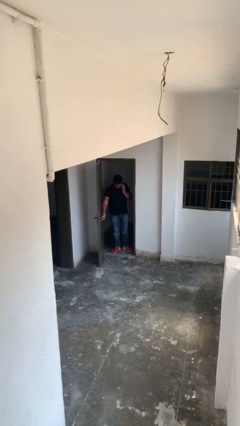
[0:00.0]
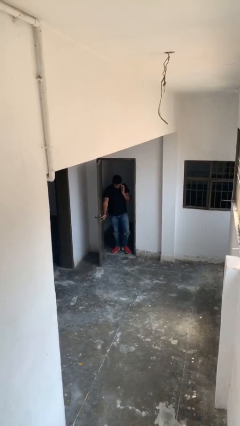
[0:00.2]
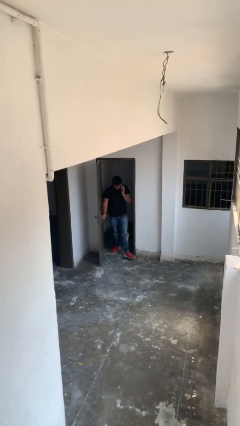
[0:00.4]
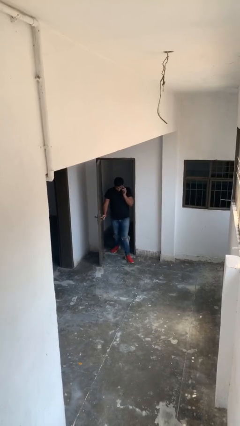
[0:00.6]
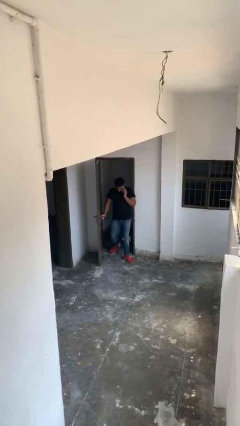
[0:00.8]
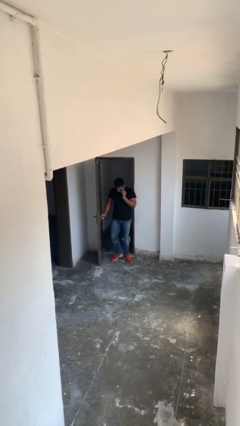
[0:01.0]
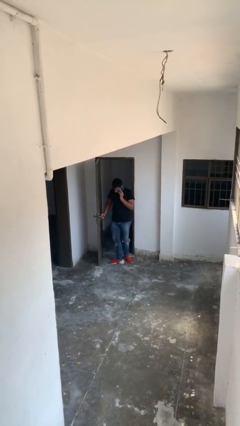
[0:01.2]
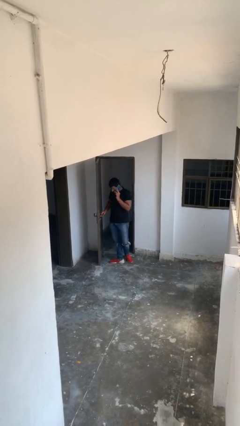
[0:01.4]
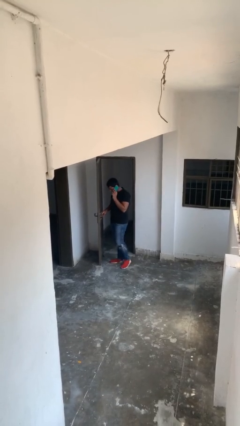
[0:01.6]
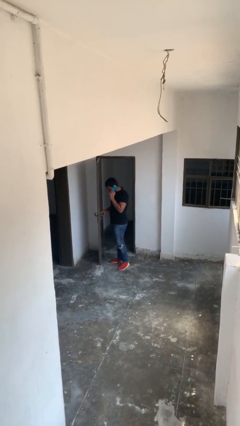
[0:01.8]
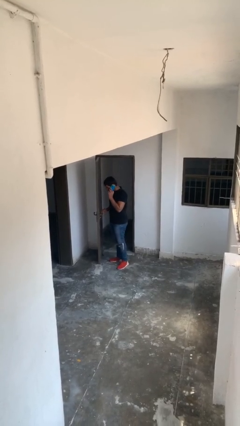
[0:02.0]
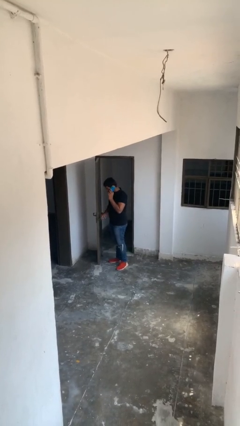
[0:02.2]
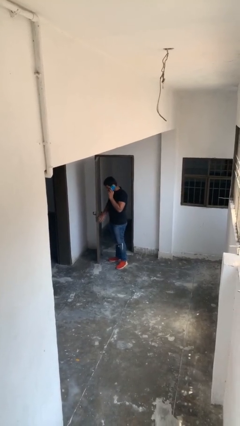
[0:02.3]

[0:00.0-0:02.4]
person enters scene through structure

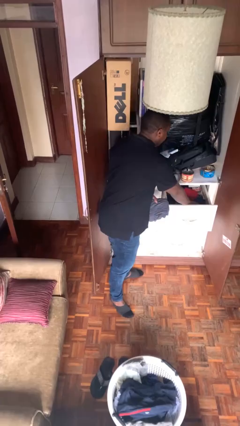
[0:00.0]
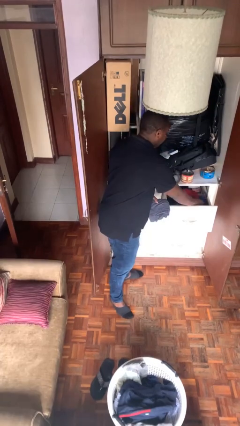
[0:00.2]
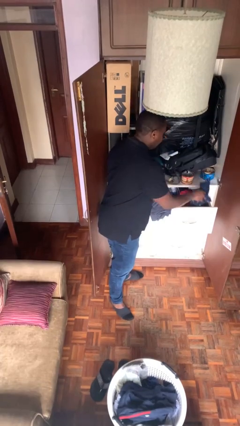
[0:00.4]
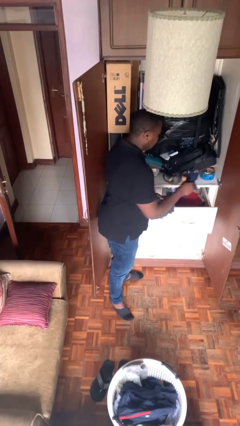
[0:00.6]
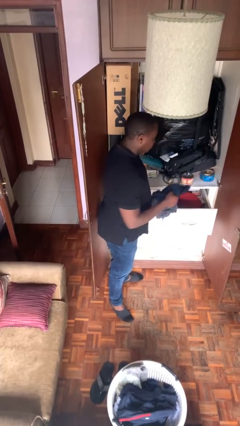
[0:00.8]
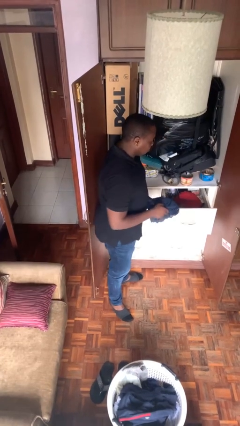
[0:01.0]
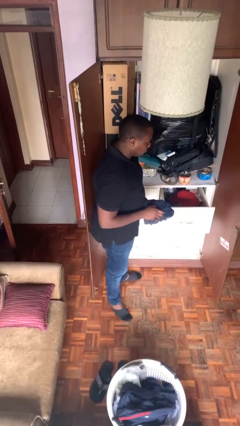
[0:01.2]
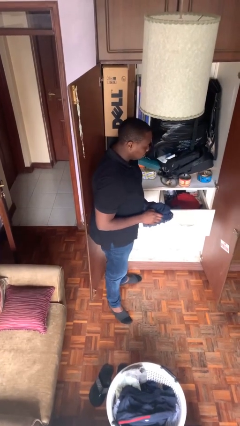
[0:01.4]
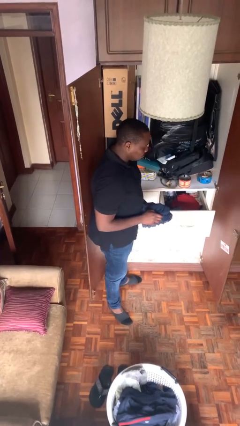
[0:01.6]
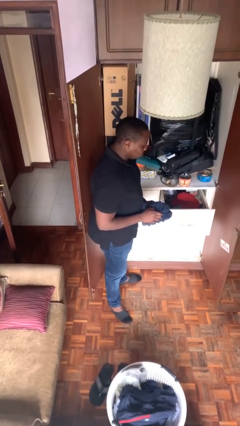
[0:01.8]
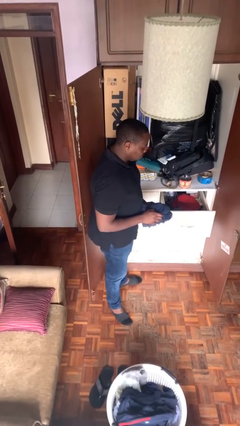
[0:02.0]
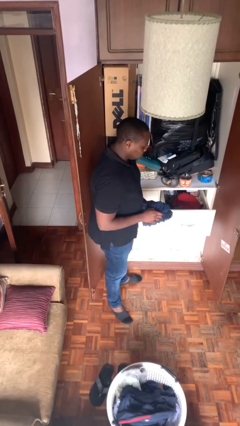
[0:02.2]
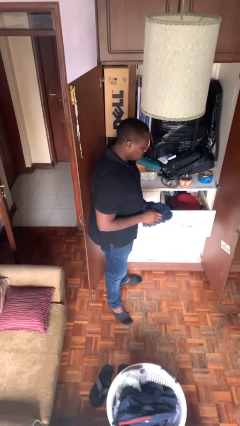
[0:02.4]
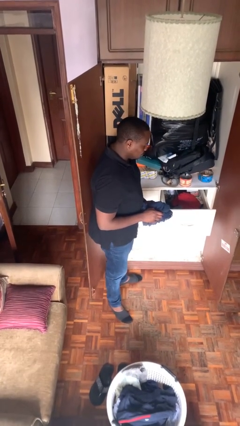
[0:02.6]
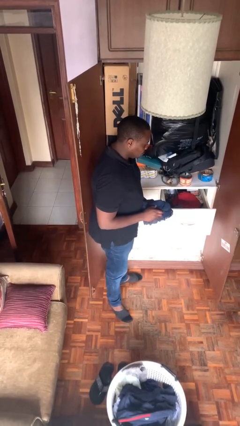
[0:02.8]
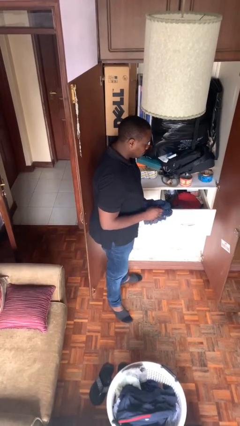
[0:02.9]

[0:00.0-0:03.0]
person takes clothes from dresser

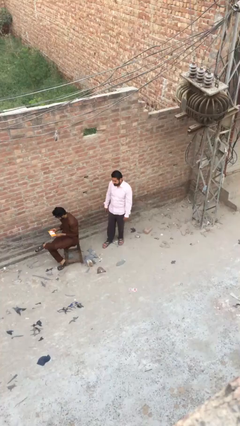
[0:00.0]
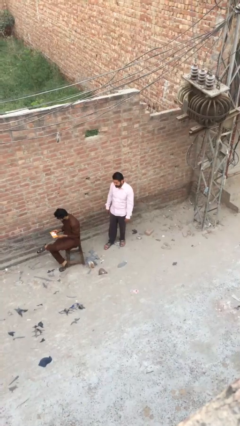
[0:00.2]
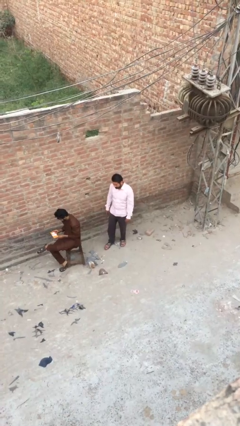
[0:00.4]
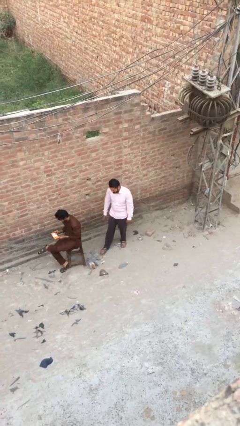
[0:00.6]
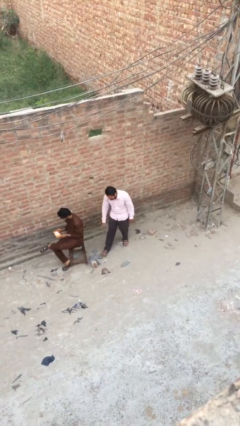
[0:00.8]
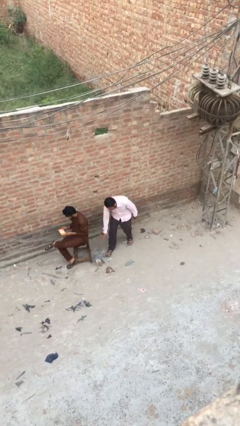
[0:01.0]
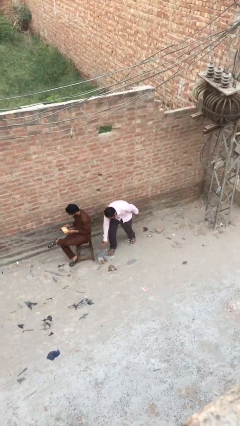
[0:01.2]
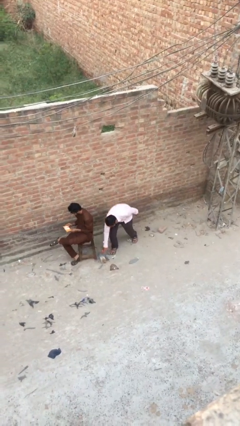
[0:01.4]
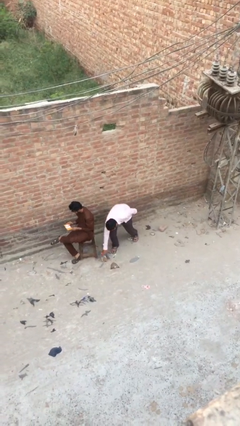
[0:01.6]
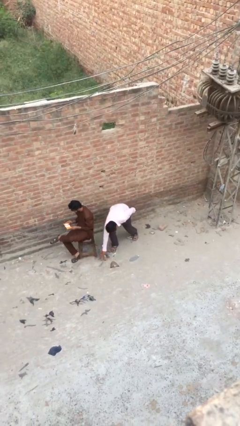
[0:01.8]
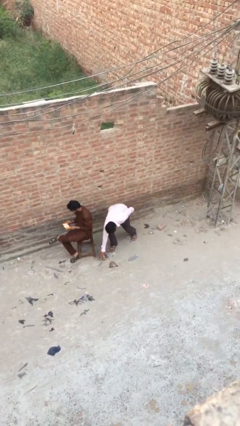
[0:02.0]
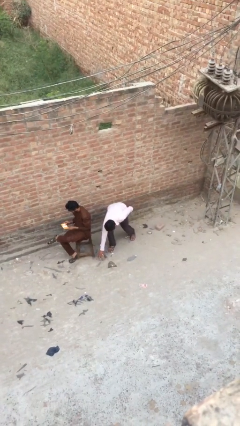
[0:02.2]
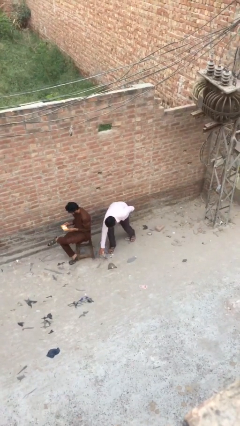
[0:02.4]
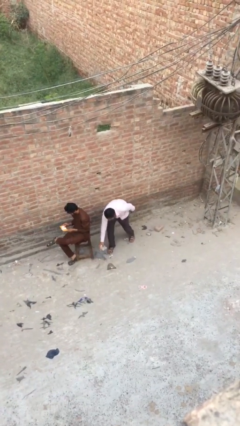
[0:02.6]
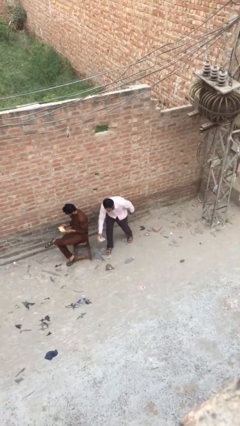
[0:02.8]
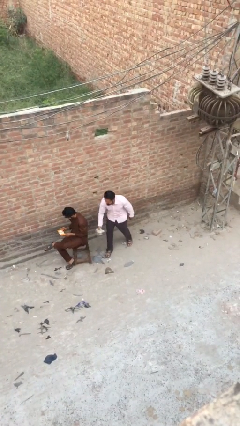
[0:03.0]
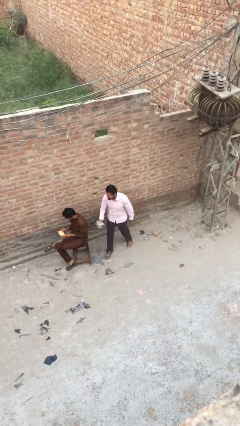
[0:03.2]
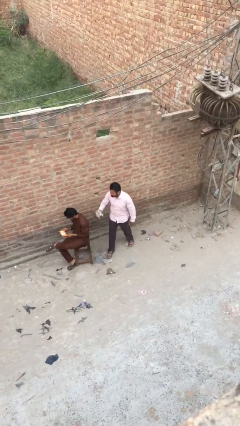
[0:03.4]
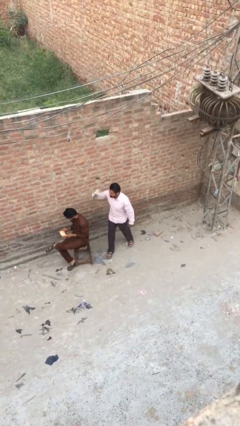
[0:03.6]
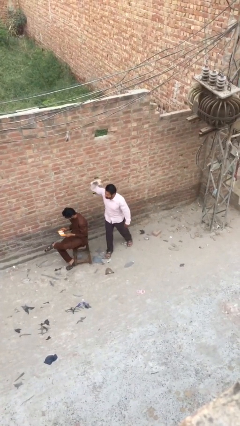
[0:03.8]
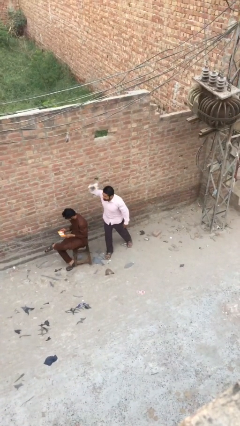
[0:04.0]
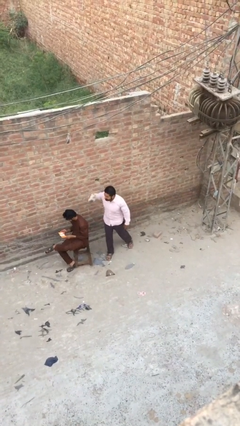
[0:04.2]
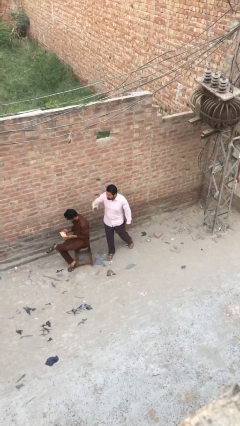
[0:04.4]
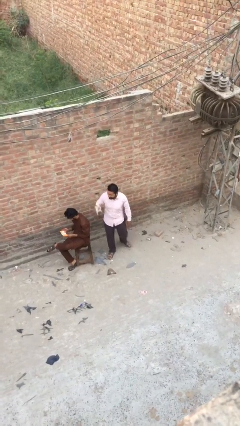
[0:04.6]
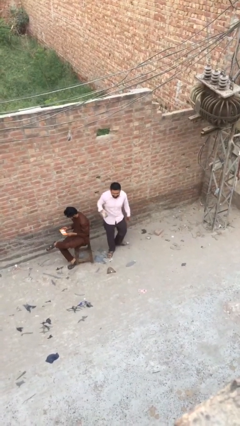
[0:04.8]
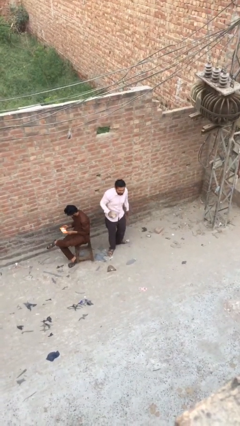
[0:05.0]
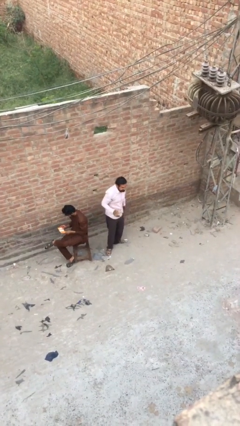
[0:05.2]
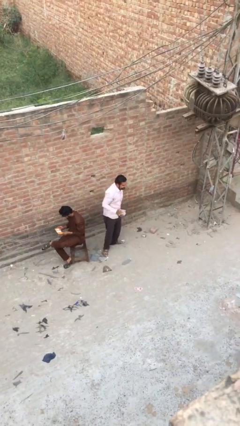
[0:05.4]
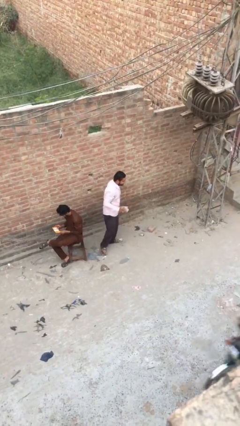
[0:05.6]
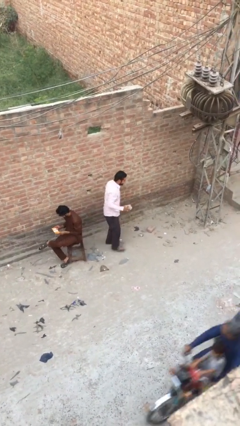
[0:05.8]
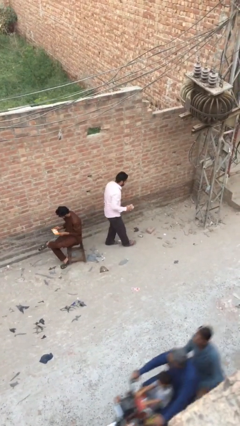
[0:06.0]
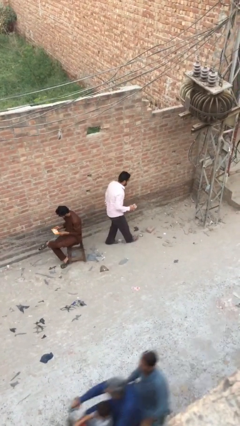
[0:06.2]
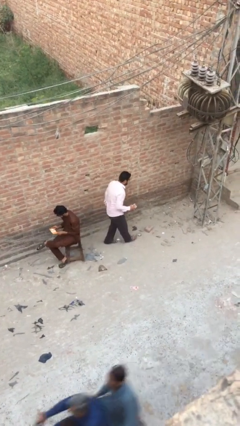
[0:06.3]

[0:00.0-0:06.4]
person steals object from person

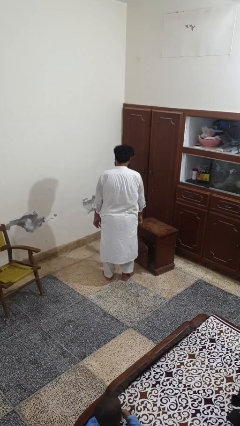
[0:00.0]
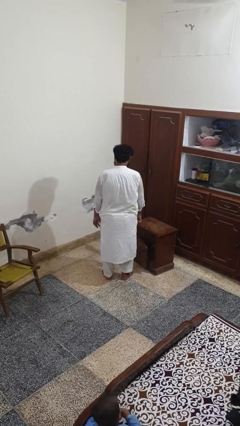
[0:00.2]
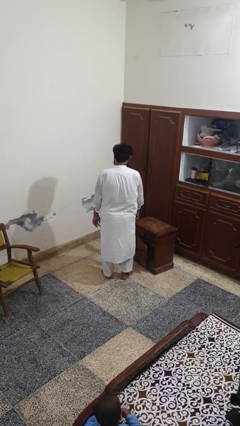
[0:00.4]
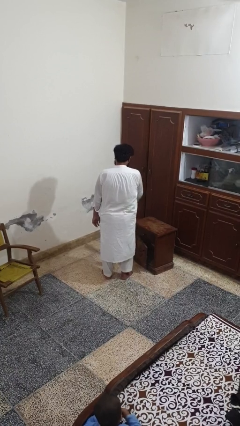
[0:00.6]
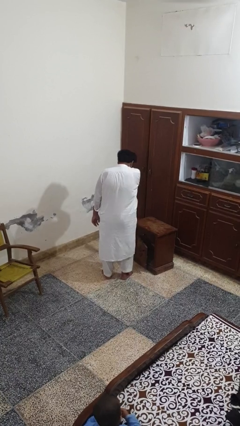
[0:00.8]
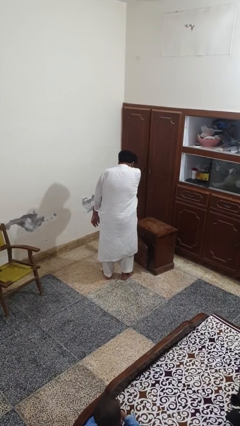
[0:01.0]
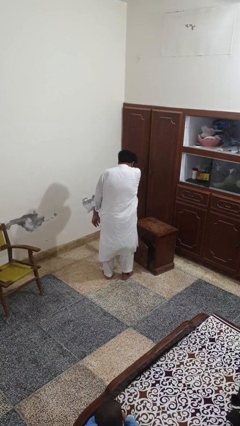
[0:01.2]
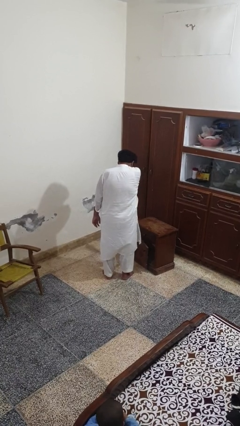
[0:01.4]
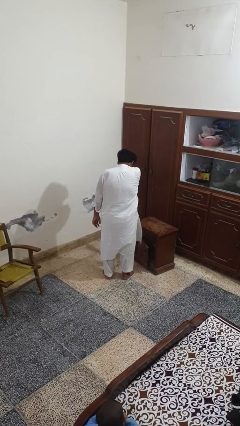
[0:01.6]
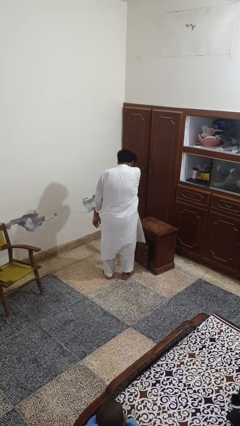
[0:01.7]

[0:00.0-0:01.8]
person sneezes into arm

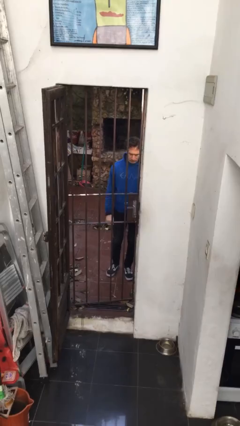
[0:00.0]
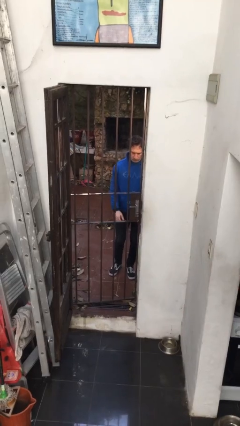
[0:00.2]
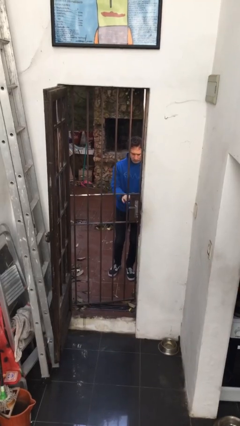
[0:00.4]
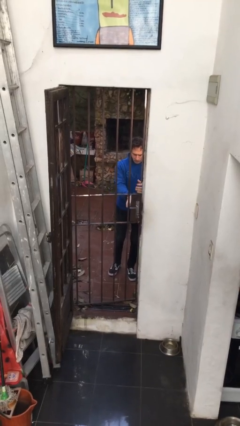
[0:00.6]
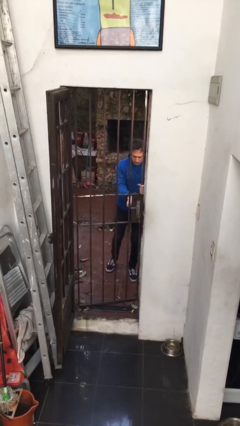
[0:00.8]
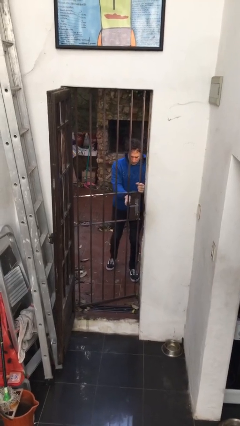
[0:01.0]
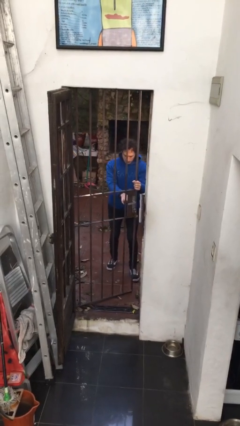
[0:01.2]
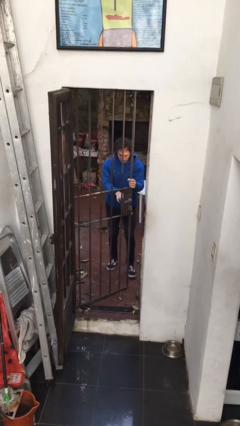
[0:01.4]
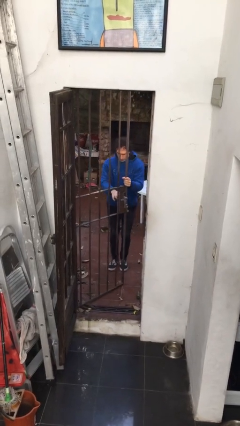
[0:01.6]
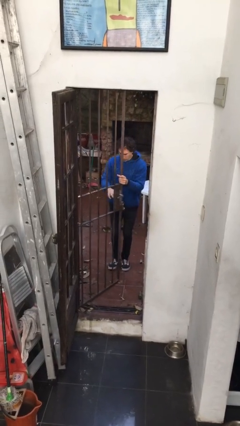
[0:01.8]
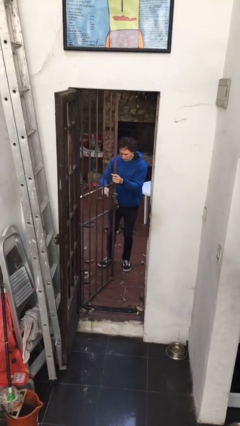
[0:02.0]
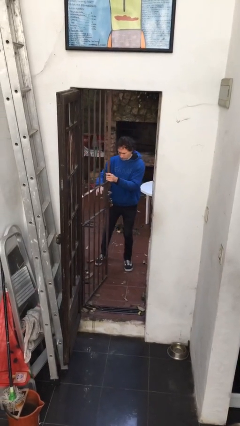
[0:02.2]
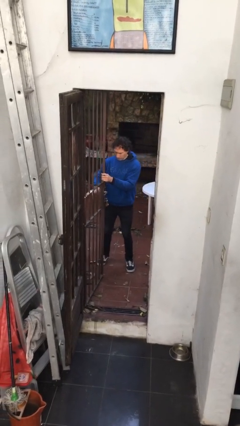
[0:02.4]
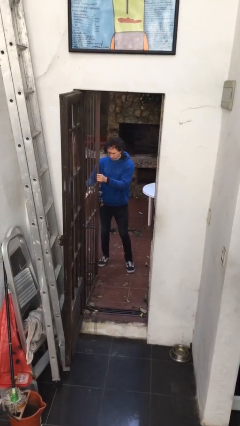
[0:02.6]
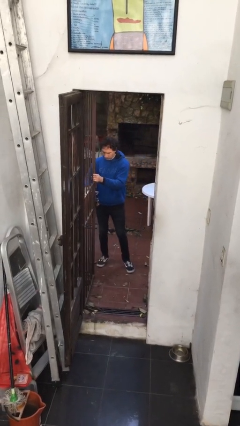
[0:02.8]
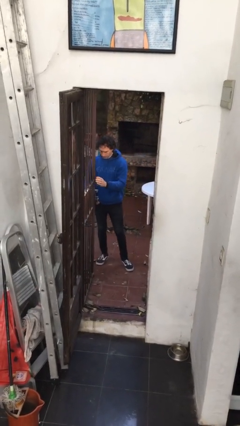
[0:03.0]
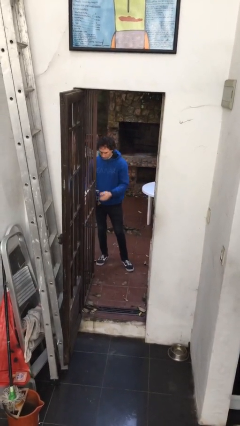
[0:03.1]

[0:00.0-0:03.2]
person opens gate

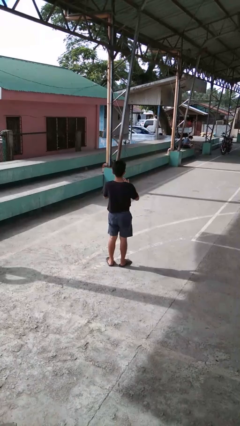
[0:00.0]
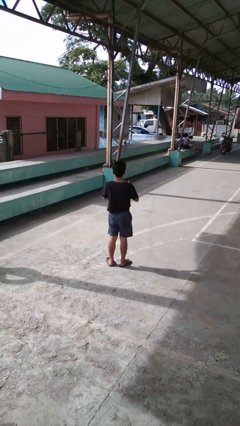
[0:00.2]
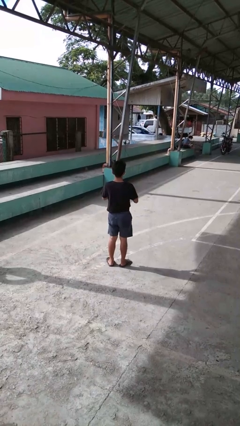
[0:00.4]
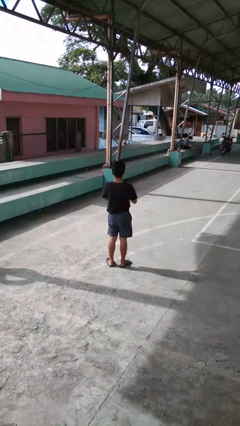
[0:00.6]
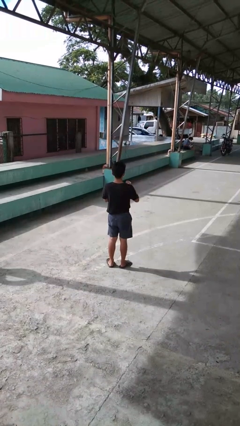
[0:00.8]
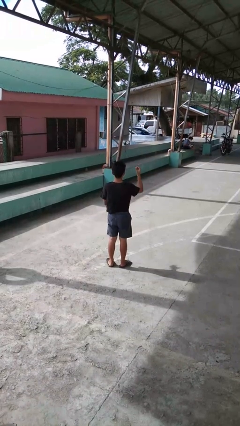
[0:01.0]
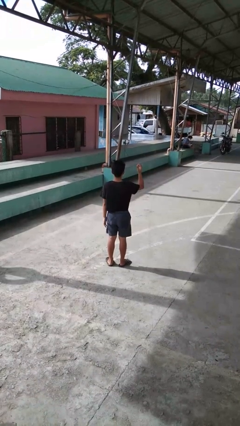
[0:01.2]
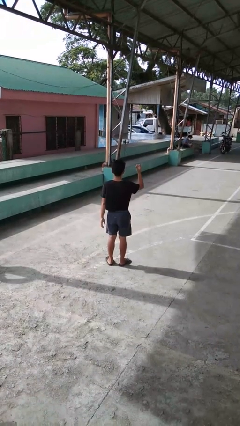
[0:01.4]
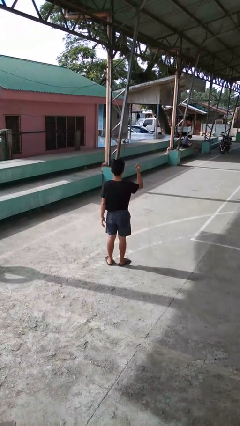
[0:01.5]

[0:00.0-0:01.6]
person takes off ring
